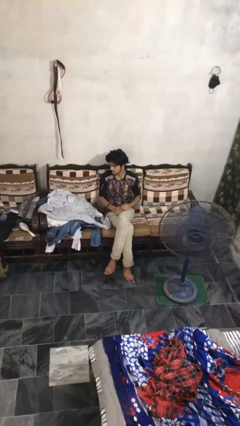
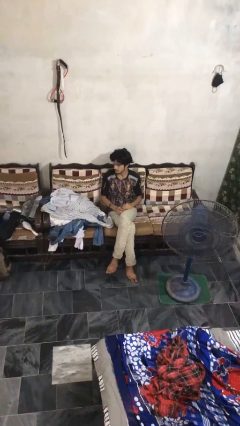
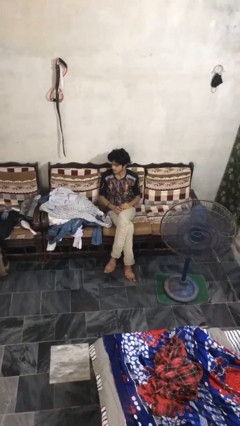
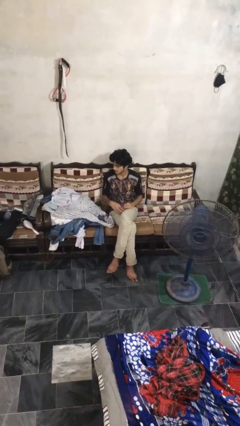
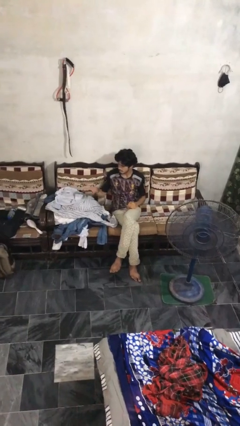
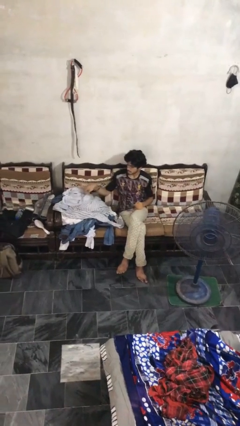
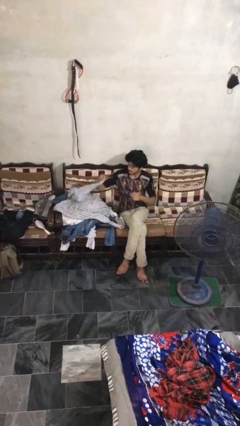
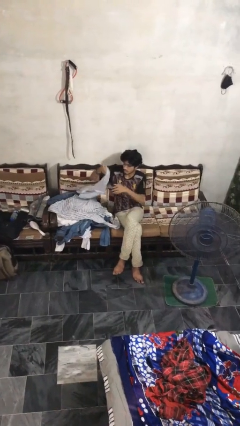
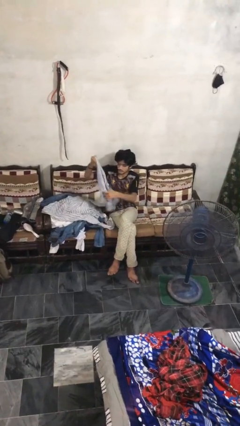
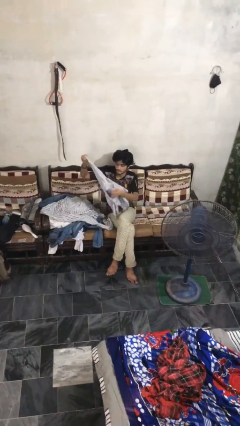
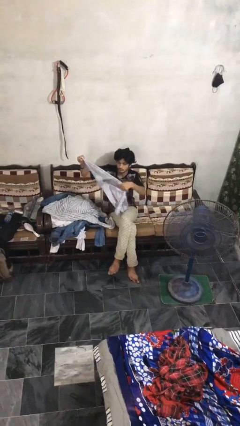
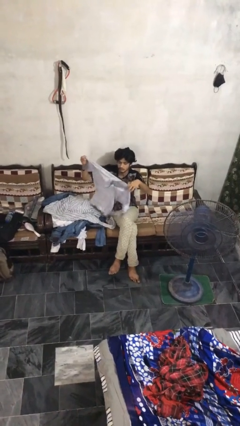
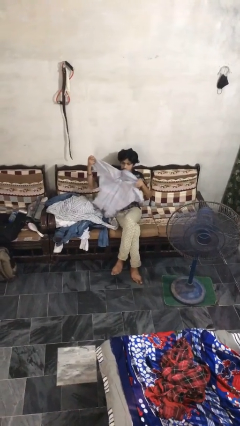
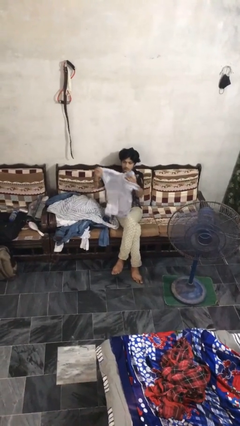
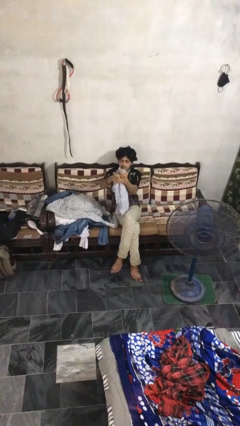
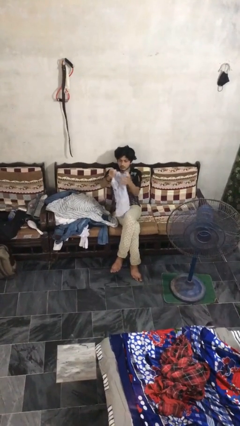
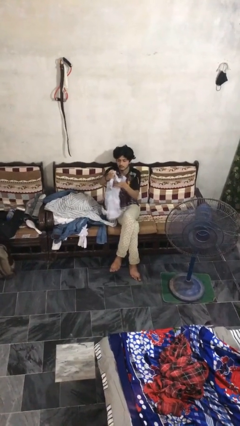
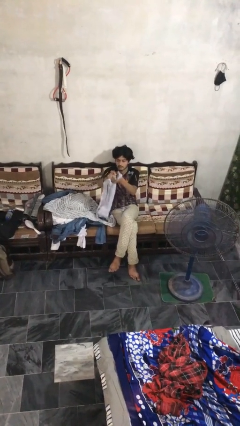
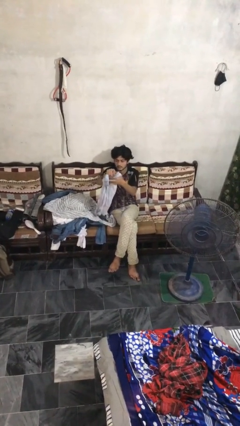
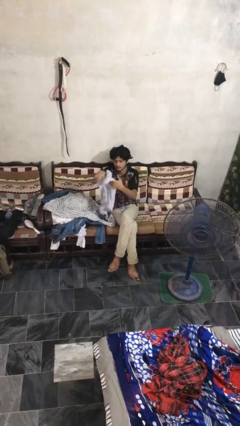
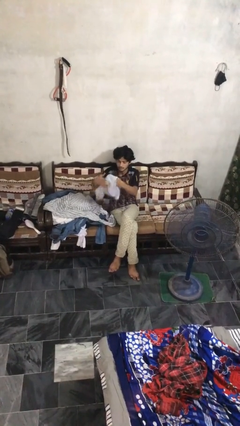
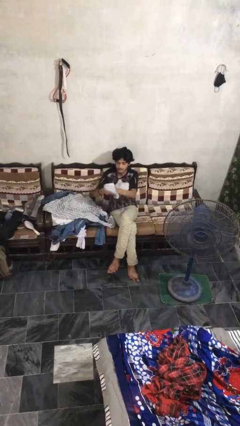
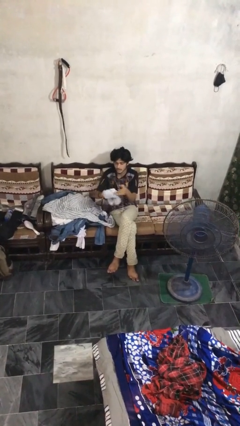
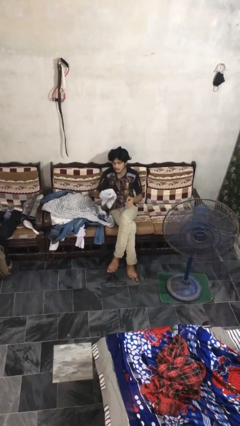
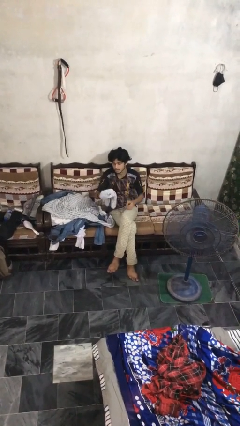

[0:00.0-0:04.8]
person folds shirt

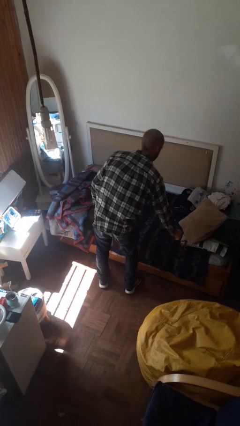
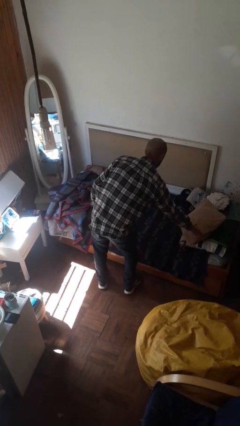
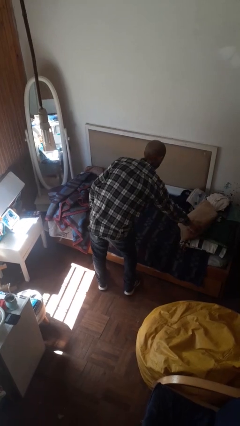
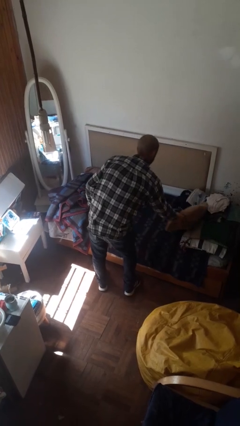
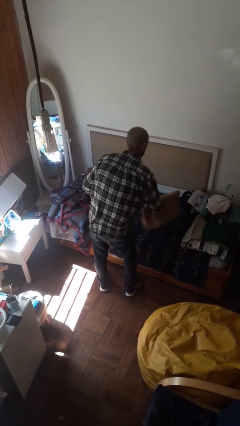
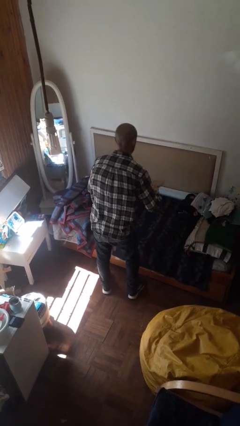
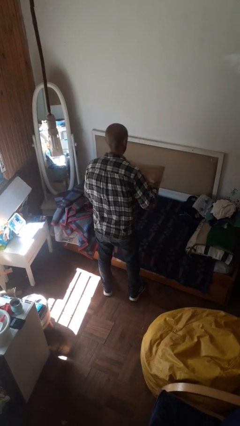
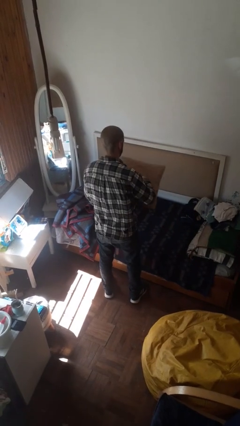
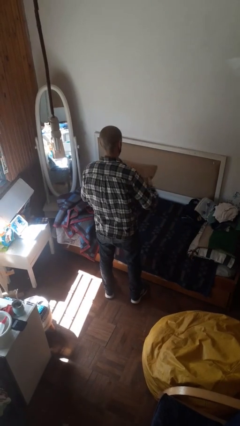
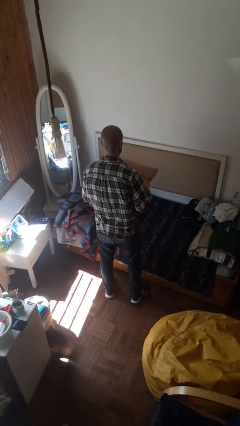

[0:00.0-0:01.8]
person picks up object from bed

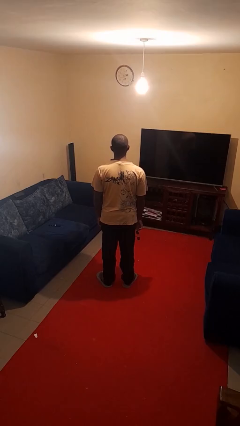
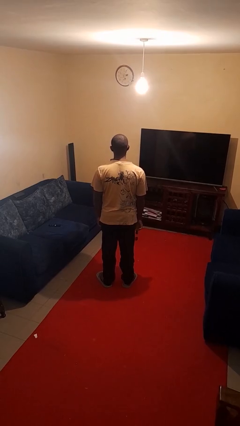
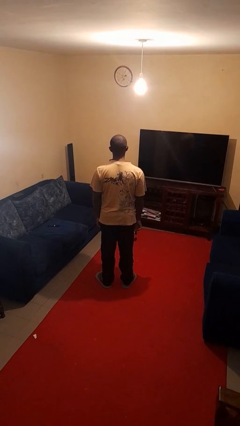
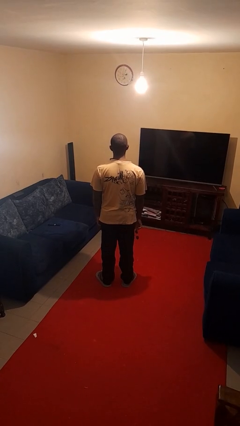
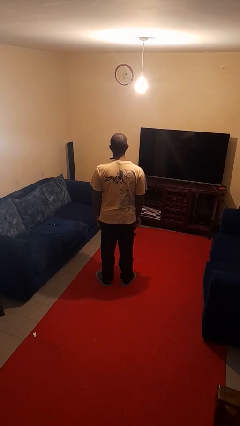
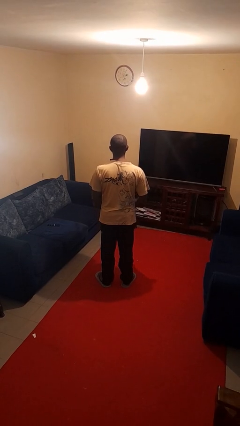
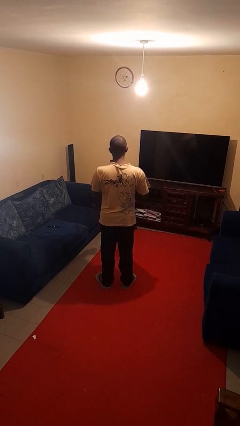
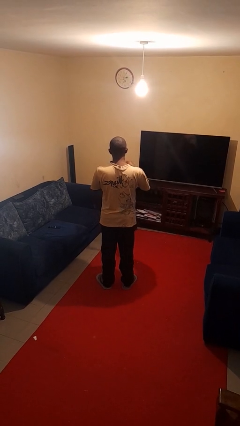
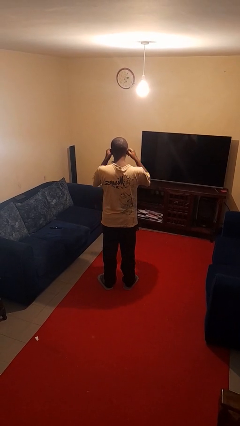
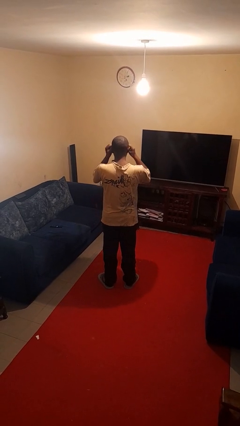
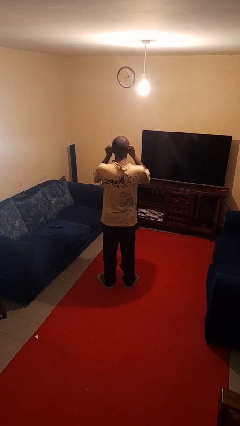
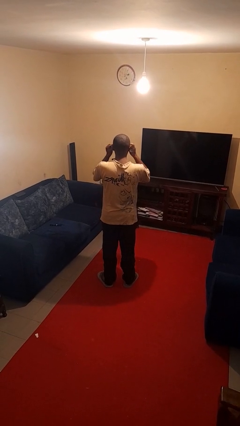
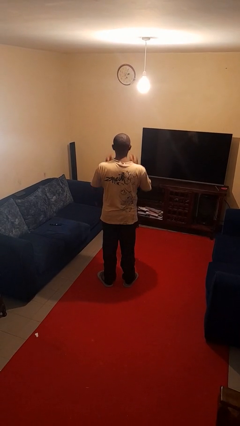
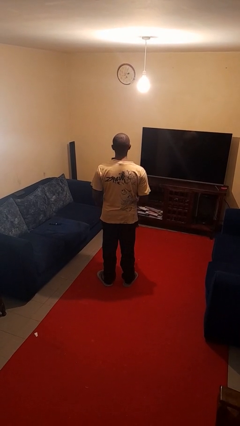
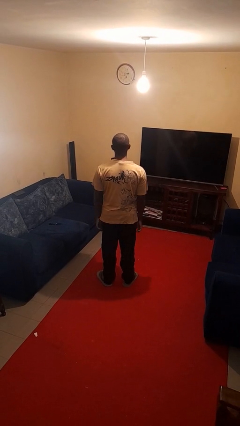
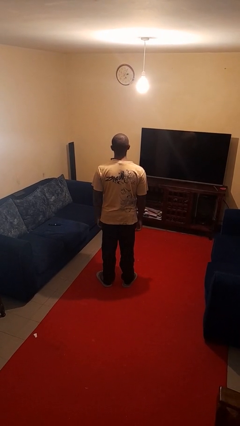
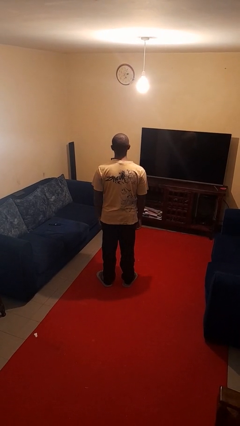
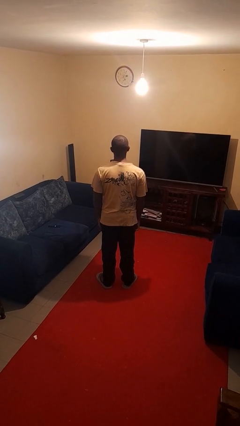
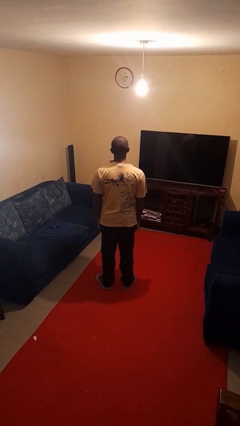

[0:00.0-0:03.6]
person puts on sunglasses

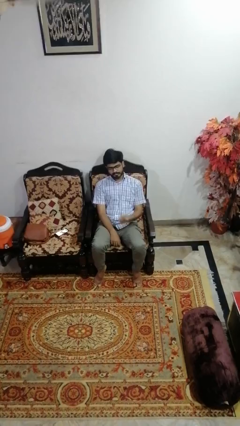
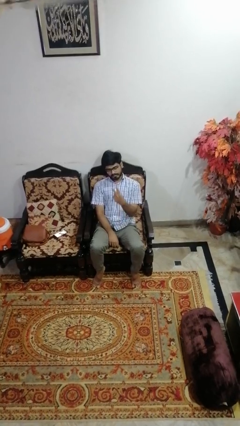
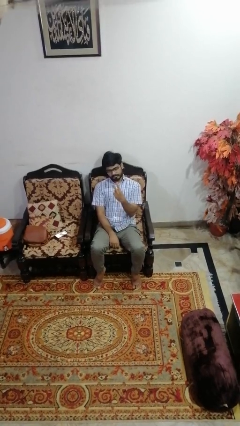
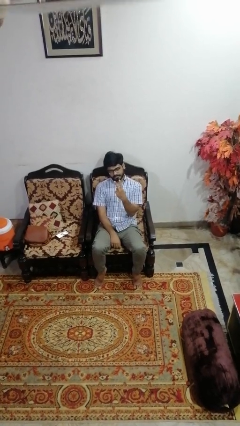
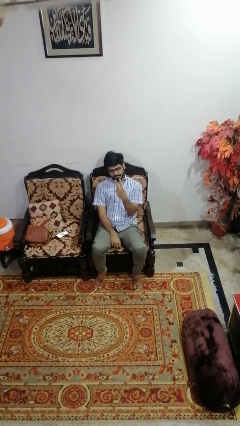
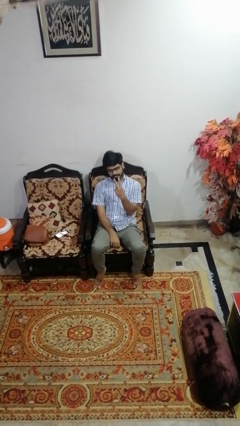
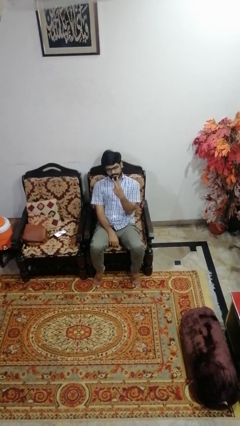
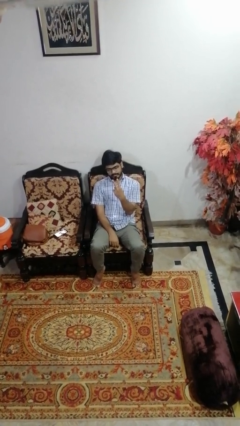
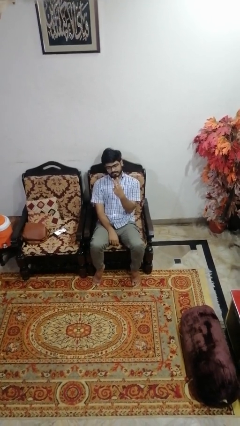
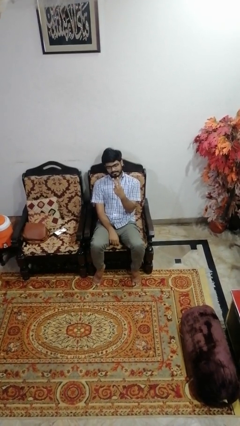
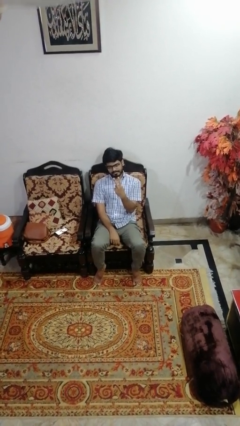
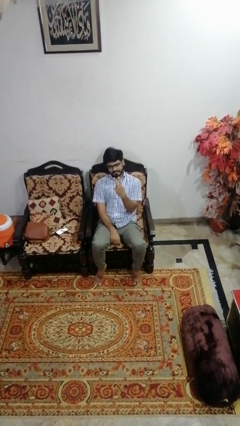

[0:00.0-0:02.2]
person gestures peace

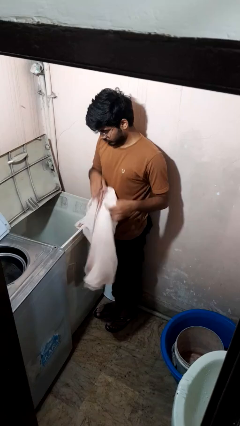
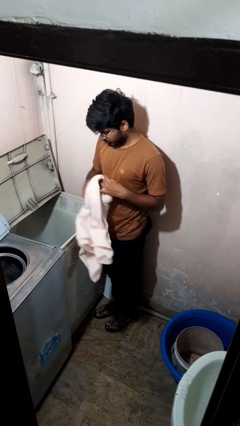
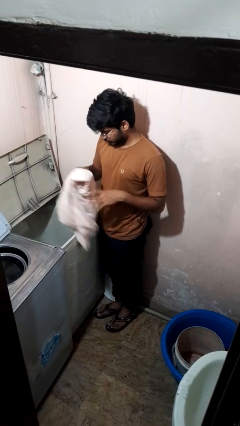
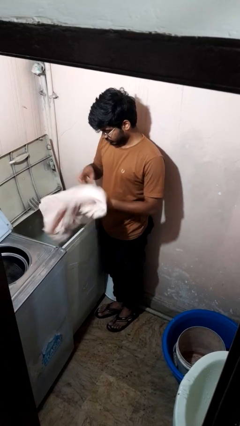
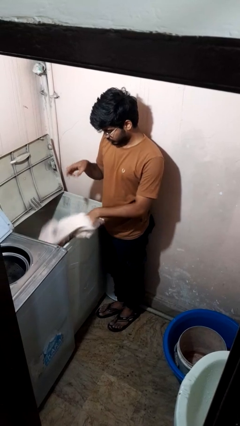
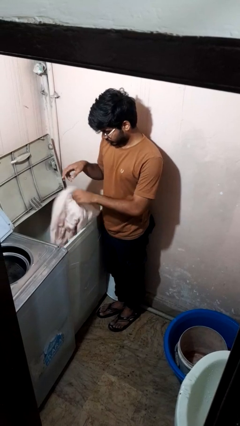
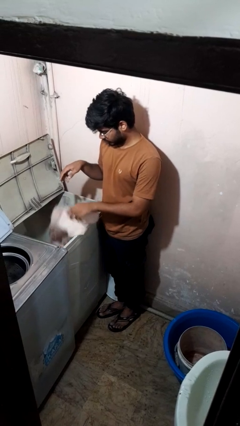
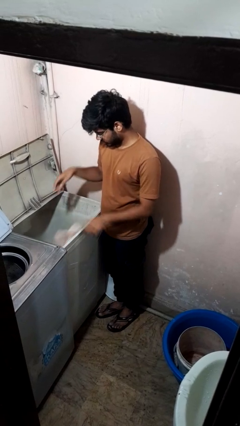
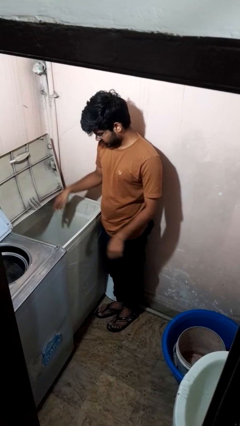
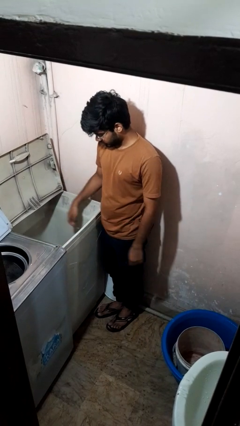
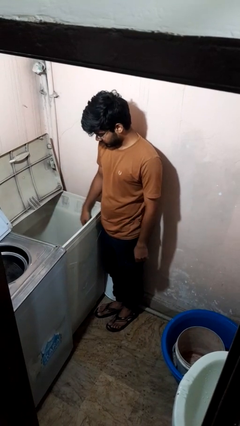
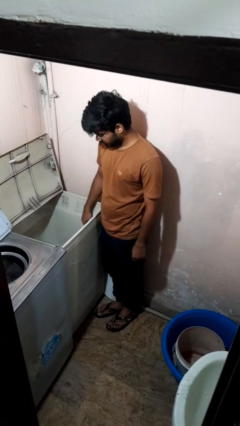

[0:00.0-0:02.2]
person loads clotheswasher

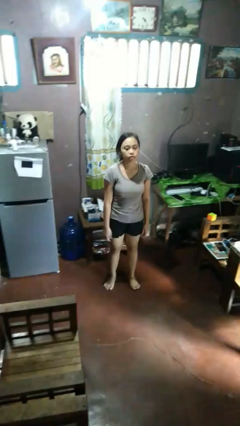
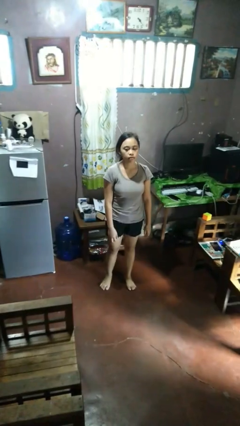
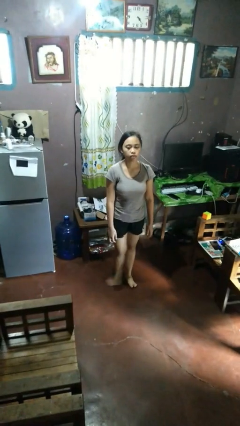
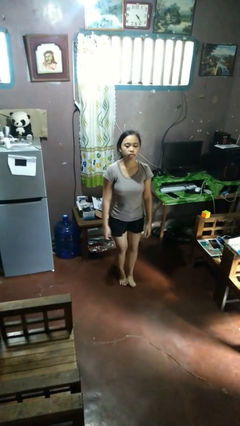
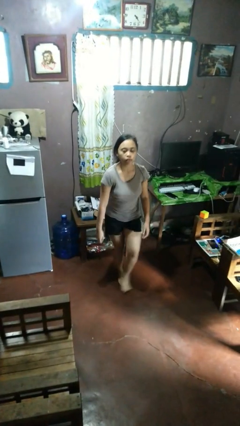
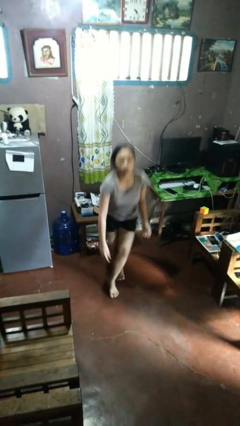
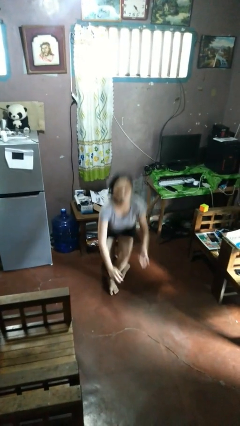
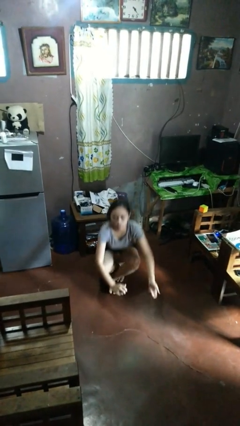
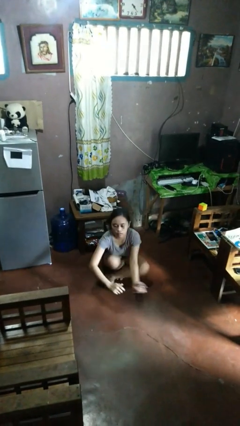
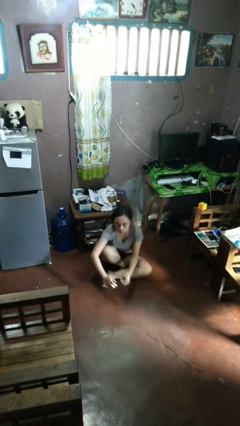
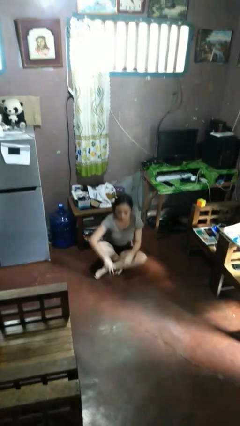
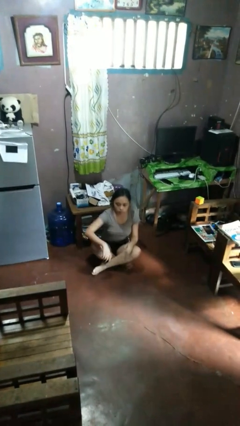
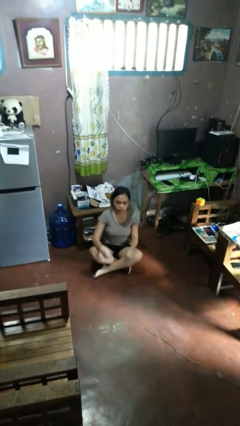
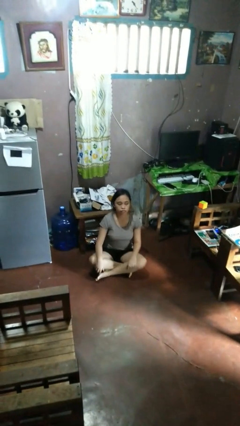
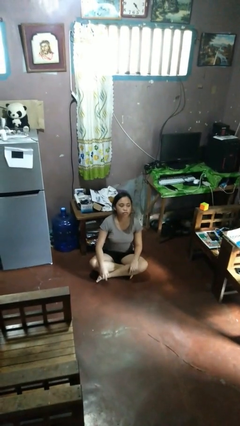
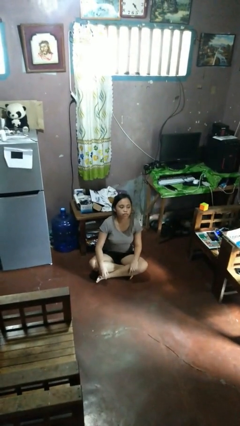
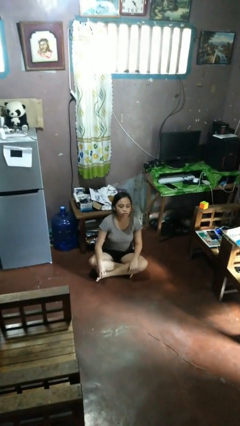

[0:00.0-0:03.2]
person sits crisscross
